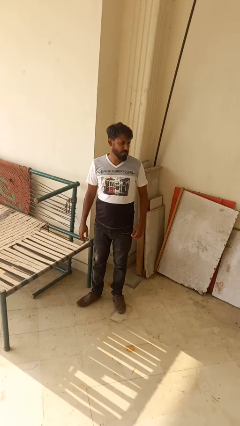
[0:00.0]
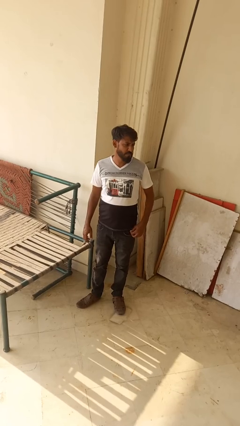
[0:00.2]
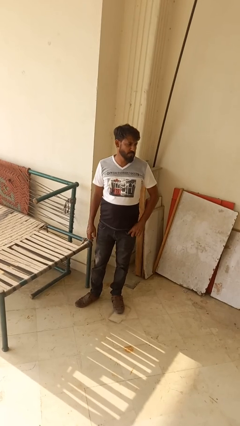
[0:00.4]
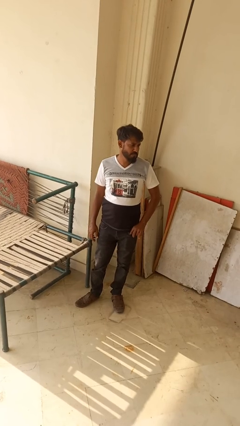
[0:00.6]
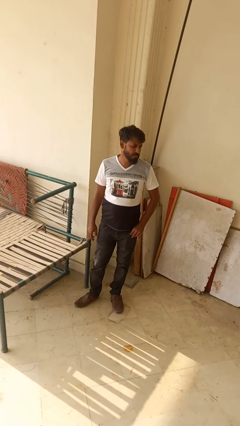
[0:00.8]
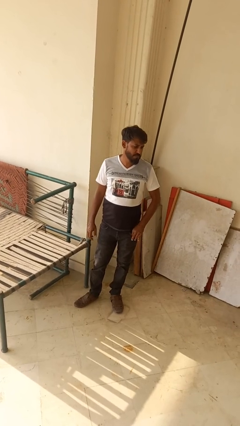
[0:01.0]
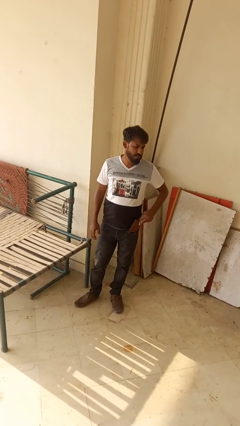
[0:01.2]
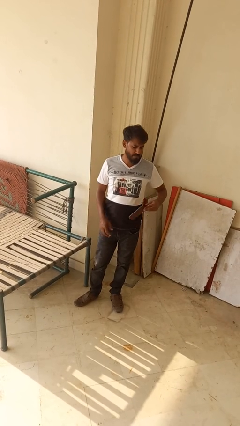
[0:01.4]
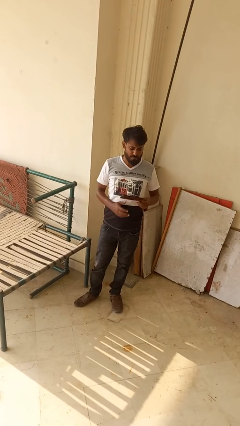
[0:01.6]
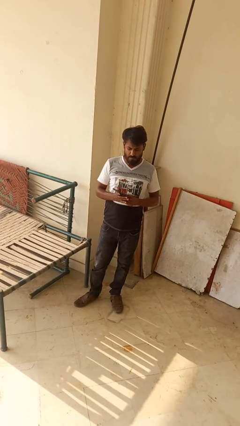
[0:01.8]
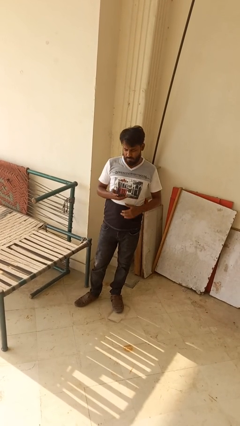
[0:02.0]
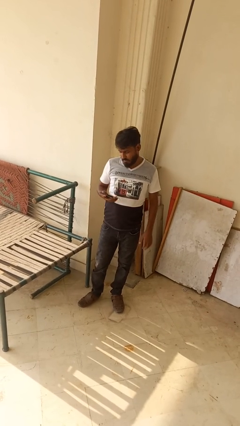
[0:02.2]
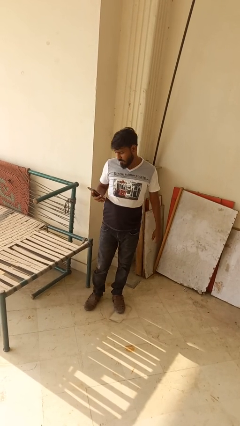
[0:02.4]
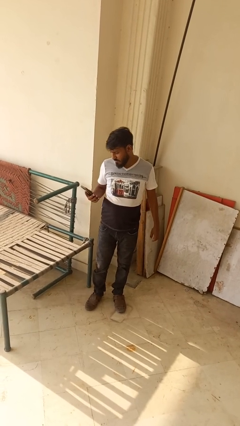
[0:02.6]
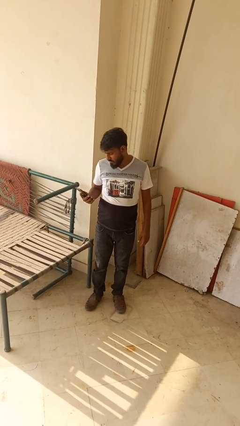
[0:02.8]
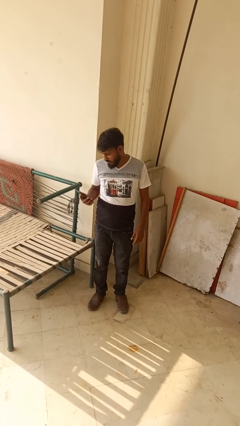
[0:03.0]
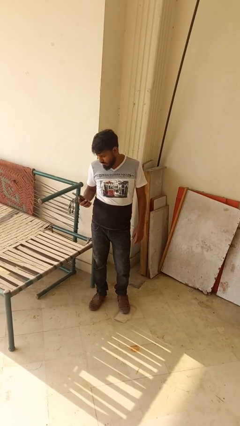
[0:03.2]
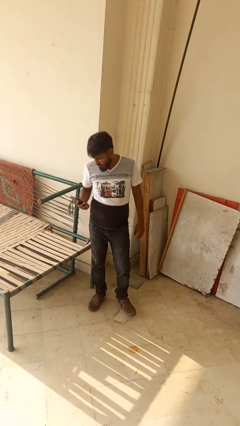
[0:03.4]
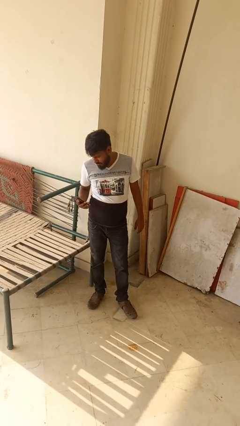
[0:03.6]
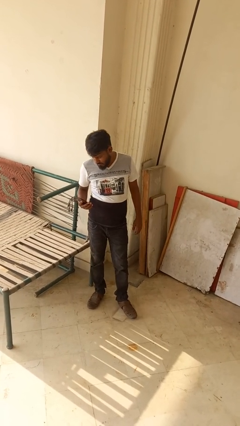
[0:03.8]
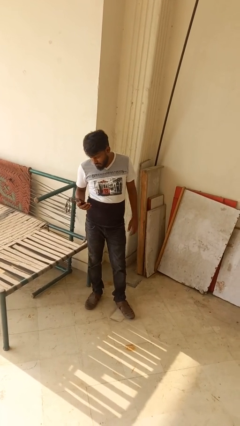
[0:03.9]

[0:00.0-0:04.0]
person takes phone from pocket

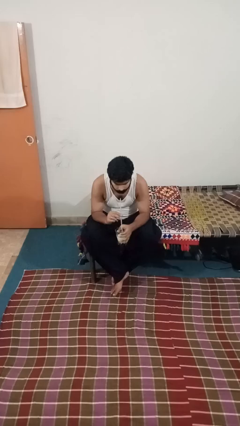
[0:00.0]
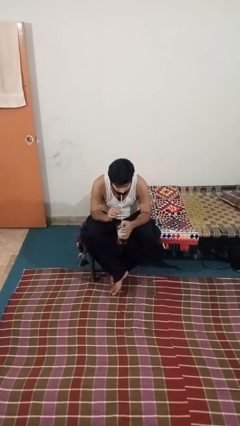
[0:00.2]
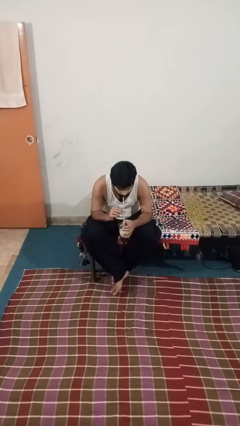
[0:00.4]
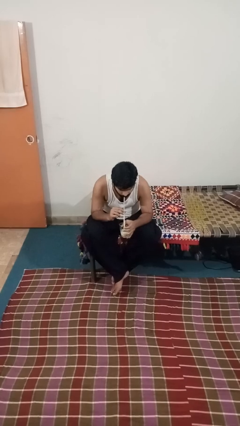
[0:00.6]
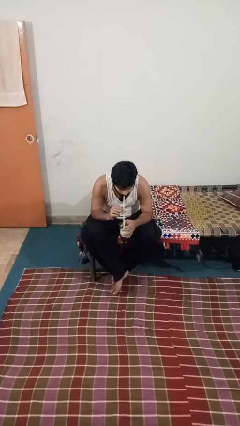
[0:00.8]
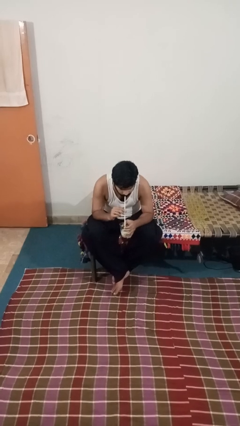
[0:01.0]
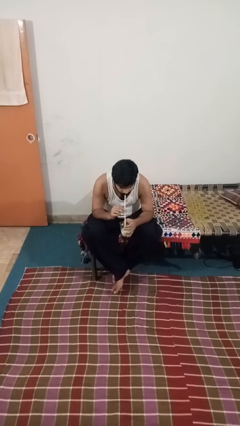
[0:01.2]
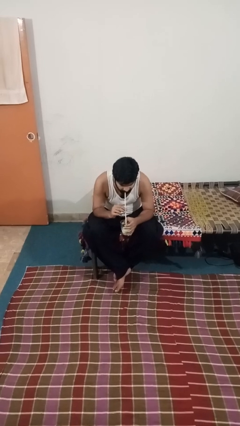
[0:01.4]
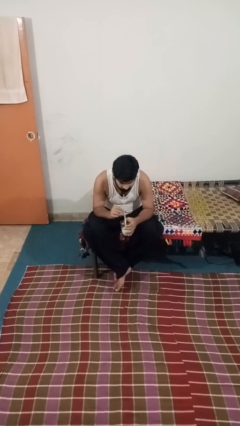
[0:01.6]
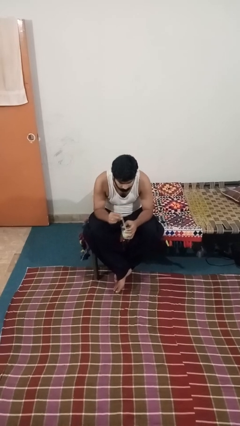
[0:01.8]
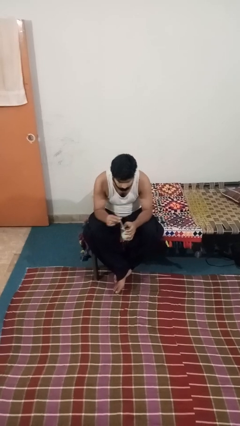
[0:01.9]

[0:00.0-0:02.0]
person drinks from straw

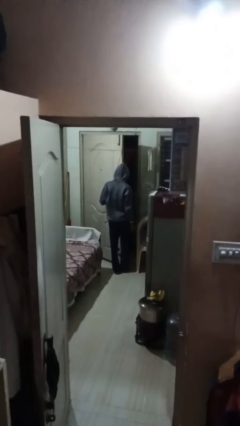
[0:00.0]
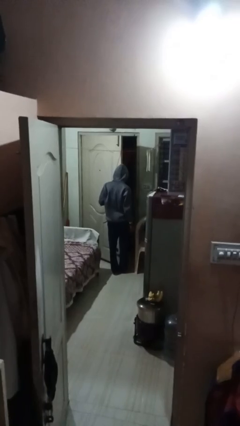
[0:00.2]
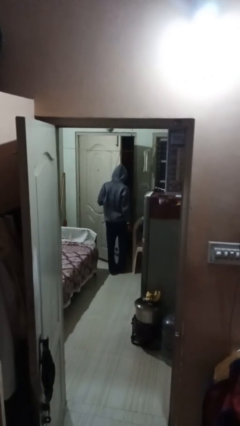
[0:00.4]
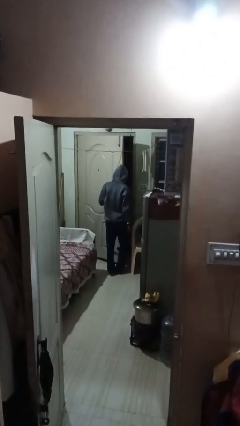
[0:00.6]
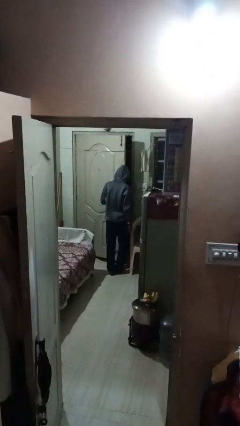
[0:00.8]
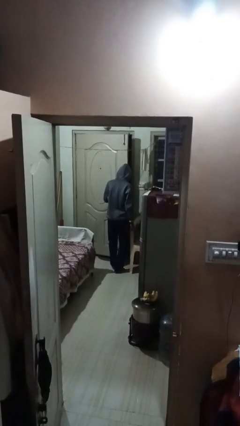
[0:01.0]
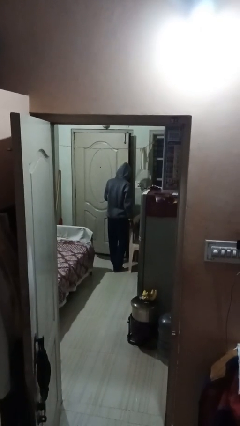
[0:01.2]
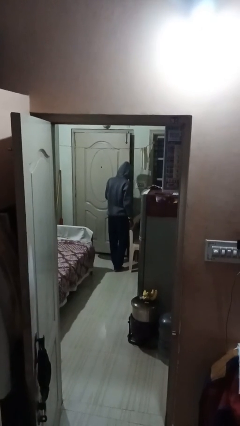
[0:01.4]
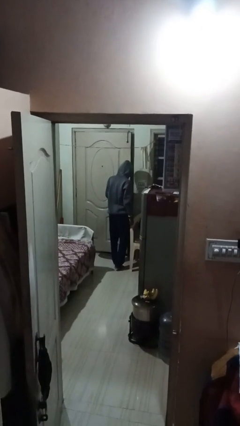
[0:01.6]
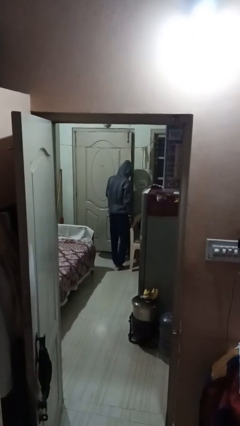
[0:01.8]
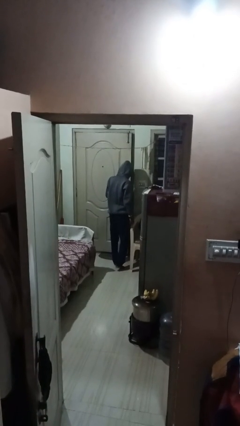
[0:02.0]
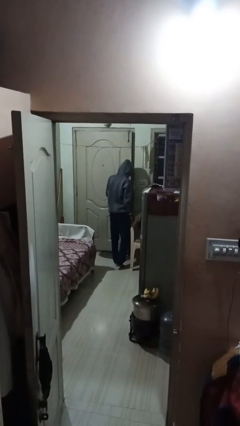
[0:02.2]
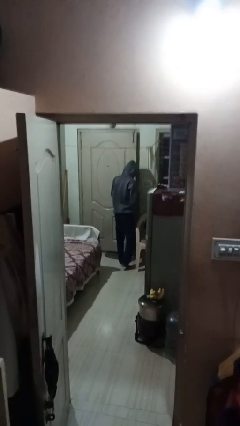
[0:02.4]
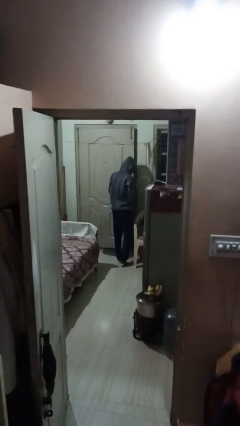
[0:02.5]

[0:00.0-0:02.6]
person closes facility door

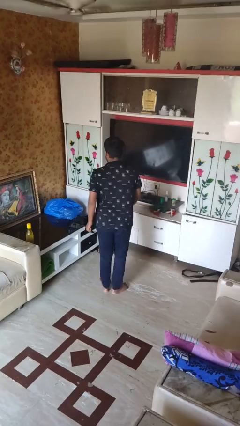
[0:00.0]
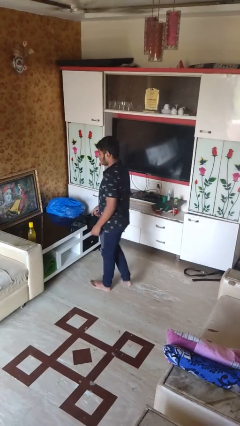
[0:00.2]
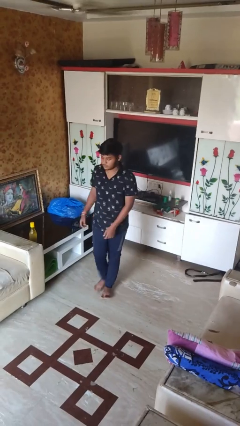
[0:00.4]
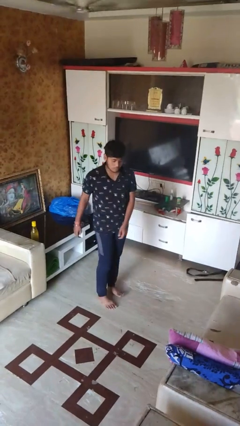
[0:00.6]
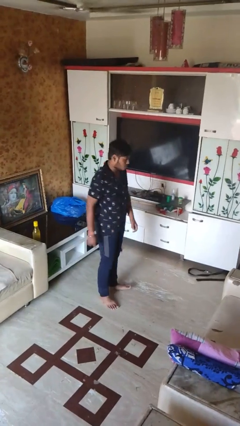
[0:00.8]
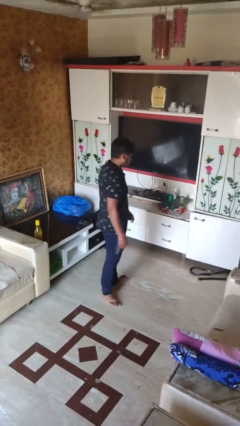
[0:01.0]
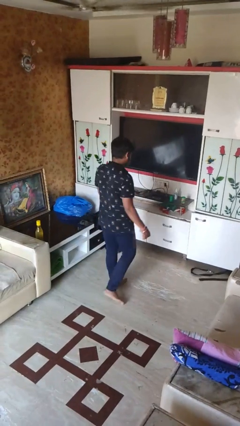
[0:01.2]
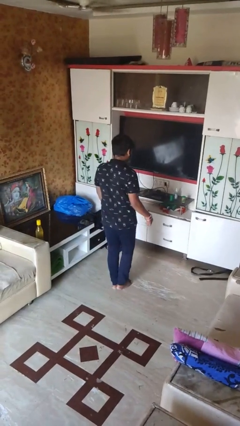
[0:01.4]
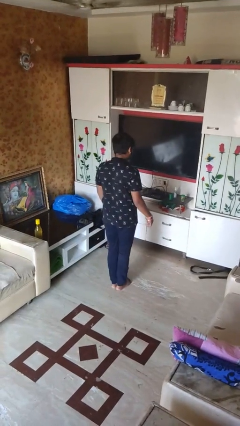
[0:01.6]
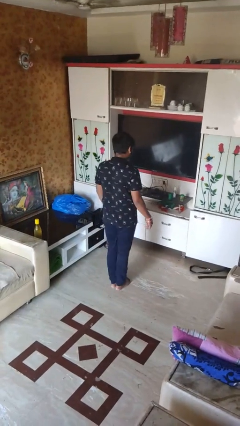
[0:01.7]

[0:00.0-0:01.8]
person twirls

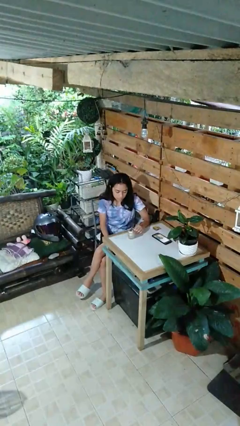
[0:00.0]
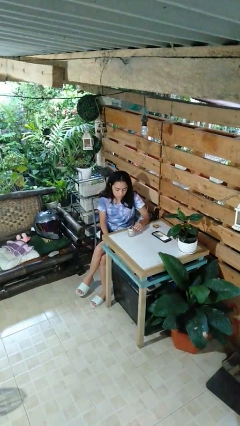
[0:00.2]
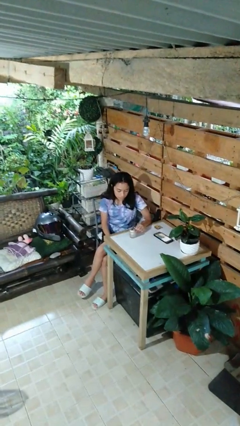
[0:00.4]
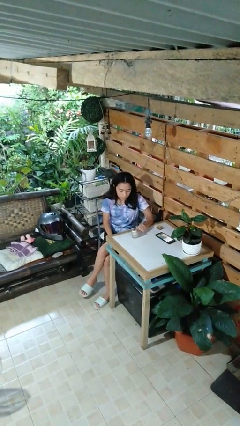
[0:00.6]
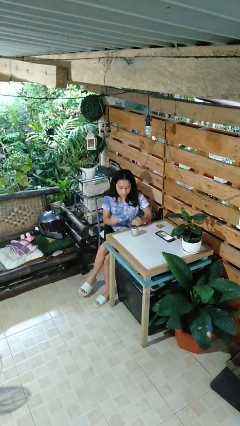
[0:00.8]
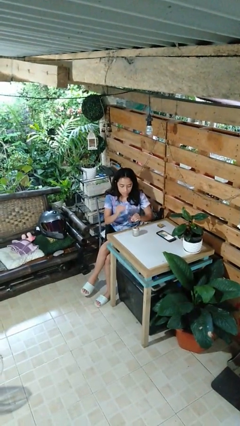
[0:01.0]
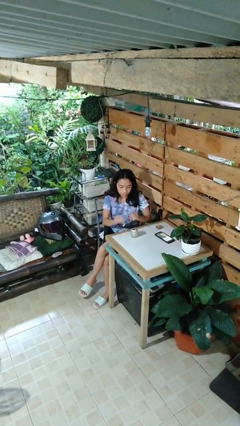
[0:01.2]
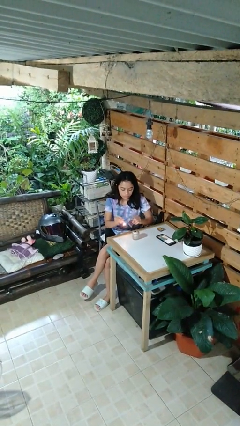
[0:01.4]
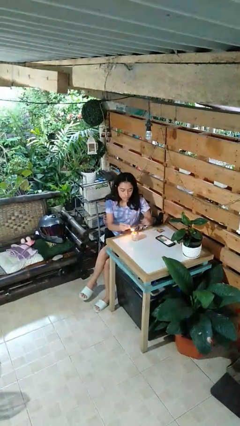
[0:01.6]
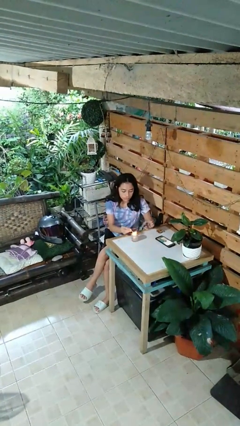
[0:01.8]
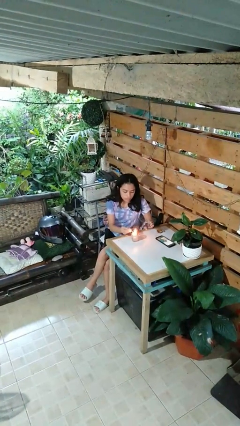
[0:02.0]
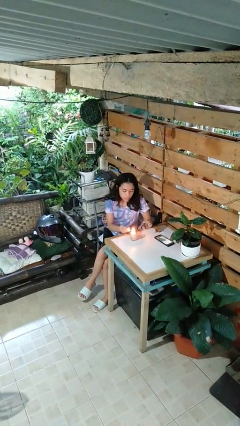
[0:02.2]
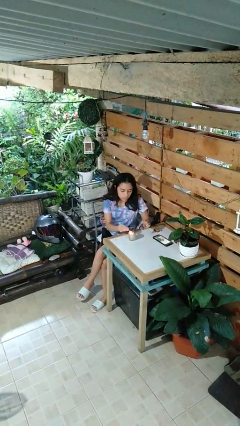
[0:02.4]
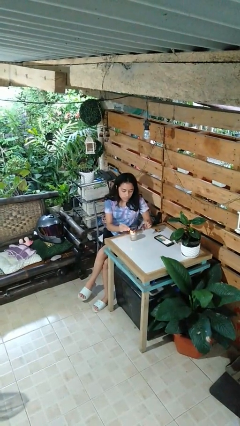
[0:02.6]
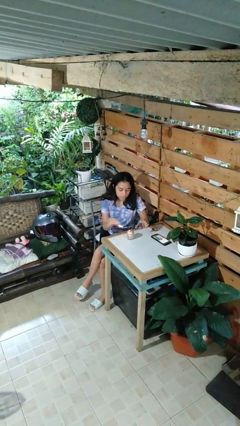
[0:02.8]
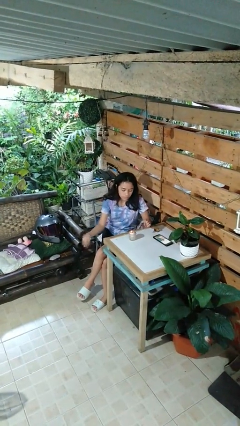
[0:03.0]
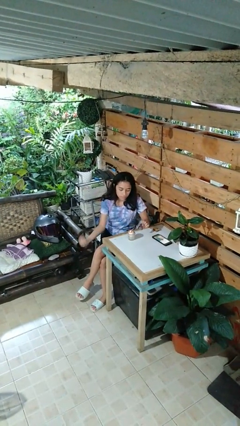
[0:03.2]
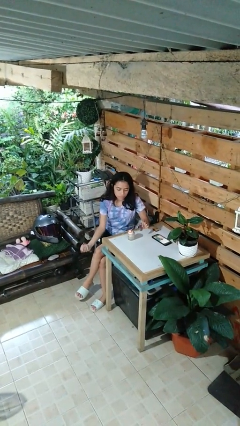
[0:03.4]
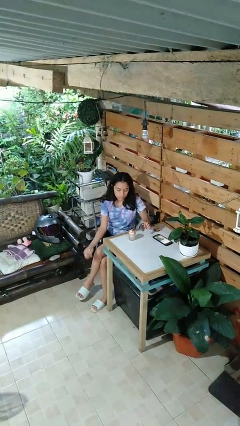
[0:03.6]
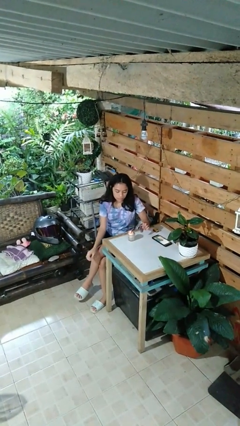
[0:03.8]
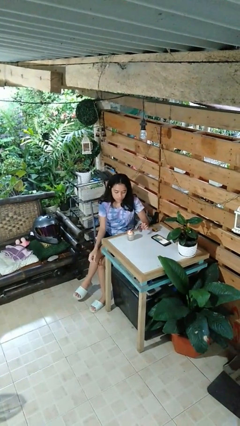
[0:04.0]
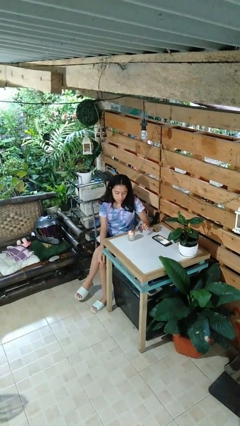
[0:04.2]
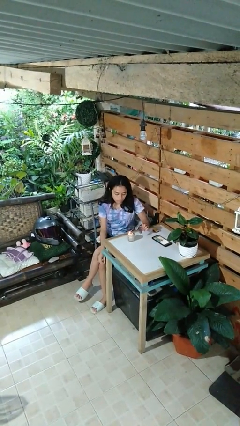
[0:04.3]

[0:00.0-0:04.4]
person lights candle

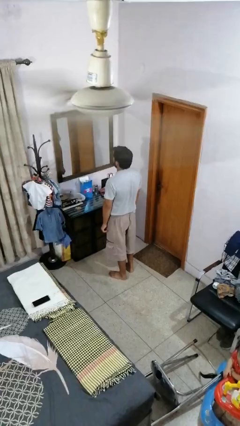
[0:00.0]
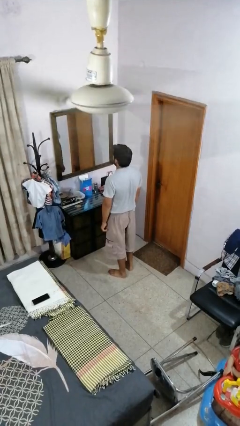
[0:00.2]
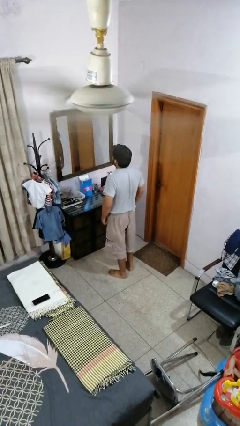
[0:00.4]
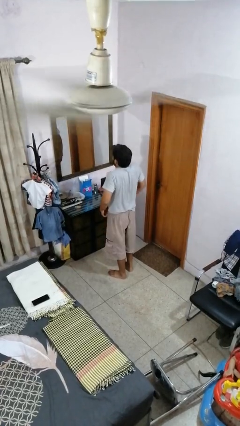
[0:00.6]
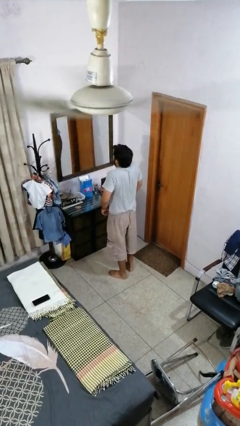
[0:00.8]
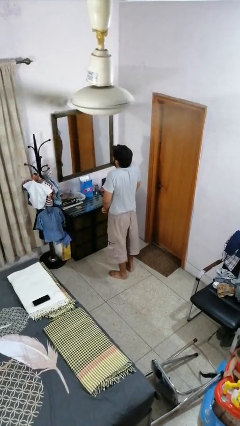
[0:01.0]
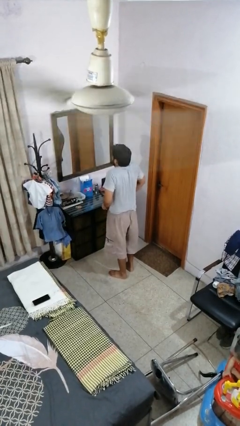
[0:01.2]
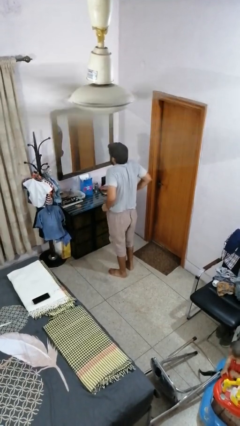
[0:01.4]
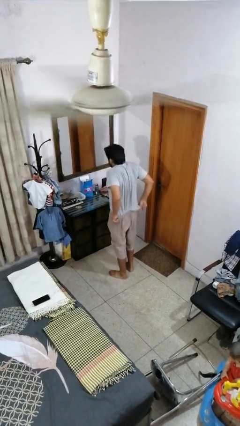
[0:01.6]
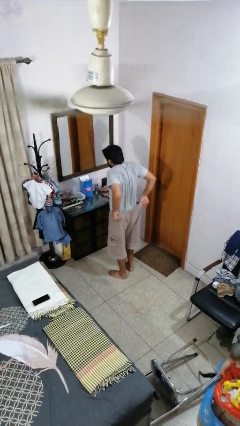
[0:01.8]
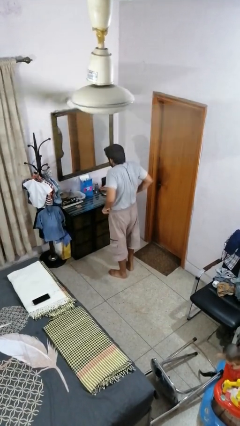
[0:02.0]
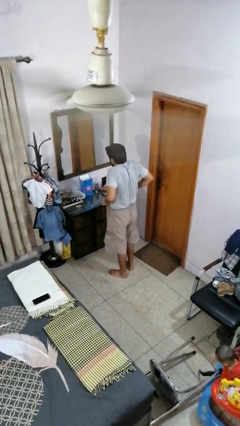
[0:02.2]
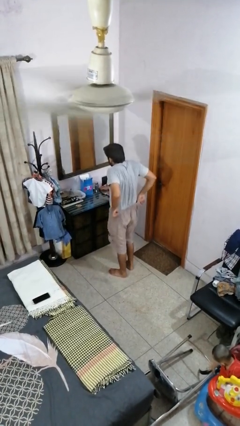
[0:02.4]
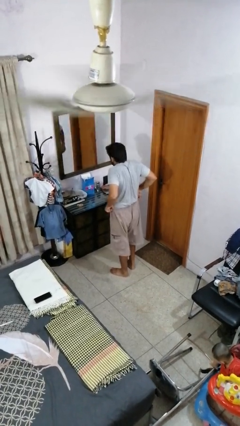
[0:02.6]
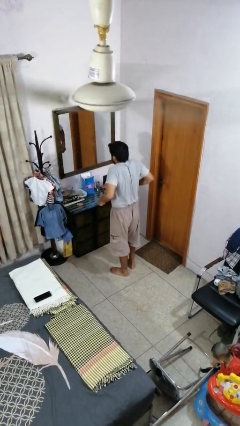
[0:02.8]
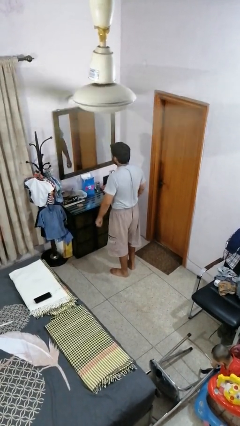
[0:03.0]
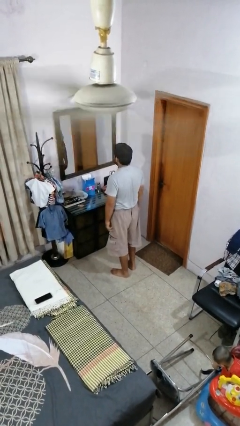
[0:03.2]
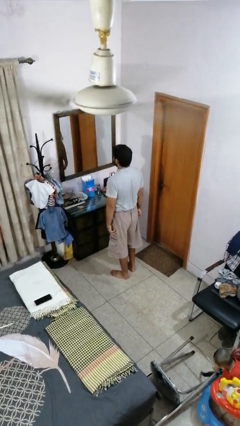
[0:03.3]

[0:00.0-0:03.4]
person hikes up pants
